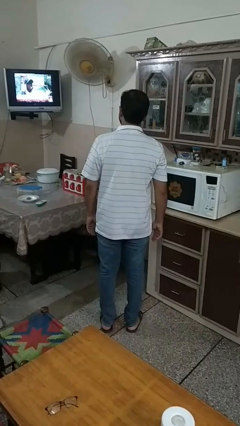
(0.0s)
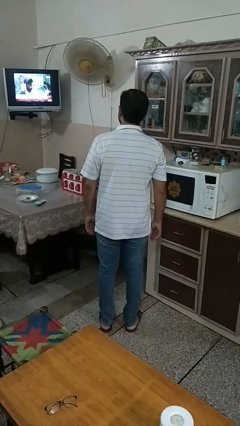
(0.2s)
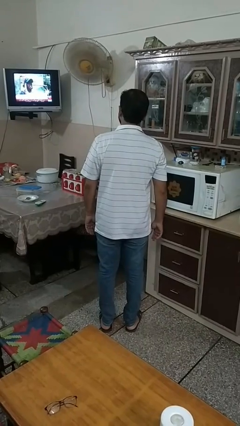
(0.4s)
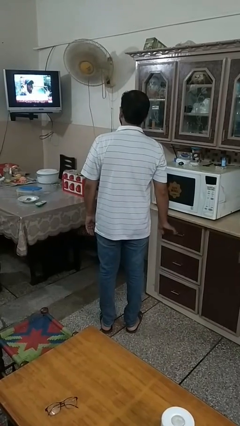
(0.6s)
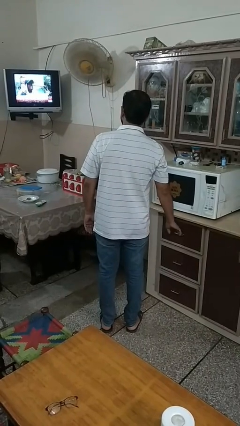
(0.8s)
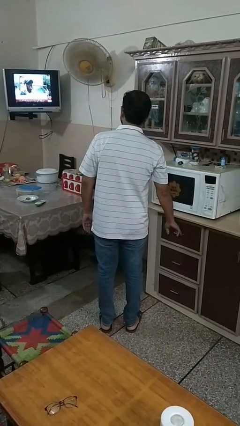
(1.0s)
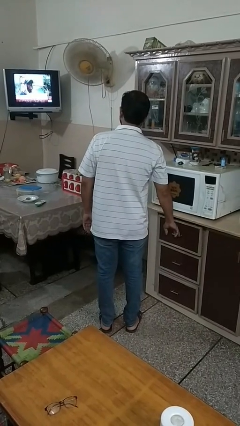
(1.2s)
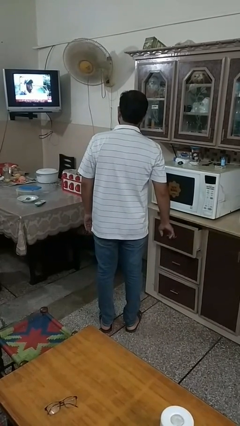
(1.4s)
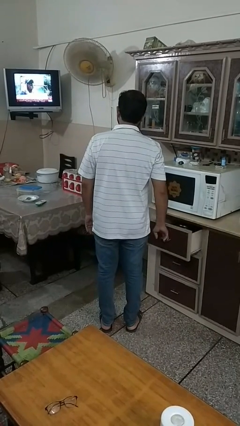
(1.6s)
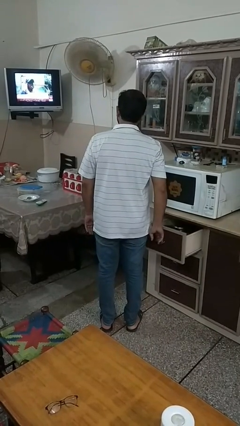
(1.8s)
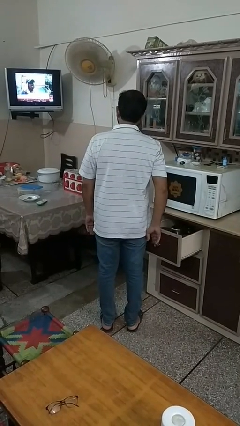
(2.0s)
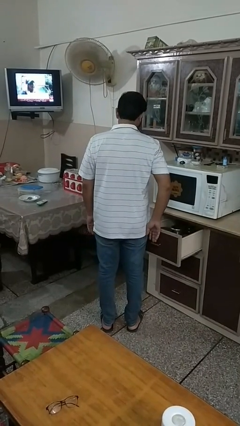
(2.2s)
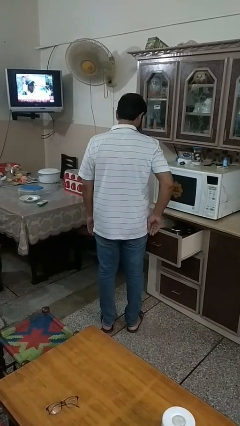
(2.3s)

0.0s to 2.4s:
person opens kitchen drawer

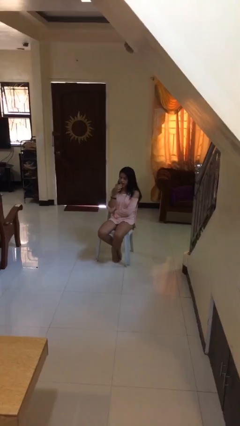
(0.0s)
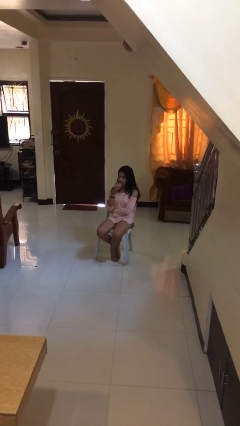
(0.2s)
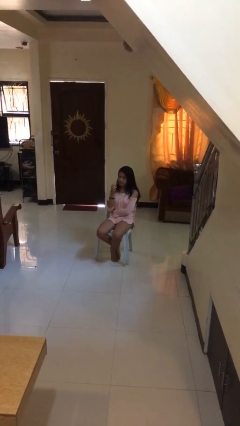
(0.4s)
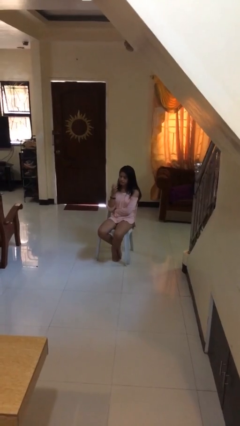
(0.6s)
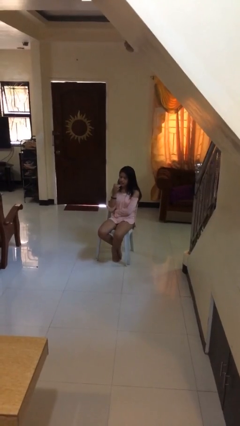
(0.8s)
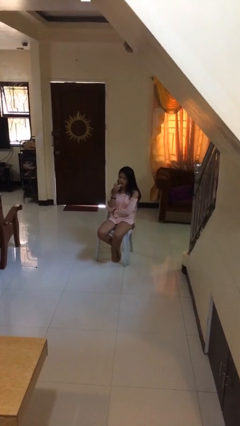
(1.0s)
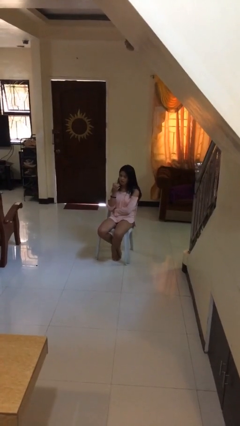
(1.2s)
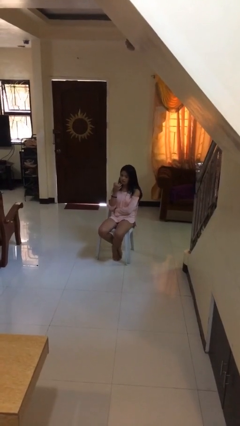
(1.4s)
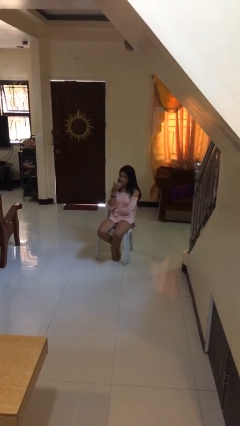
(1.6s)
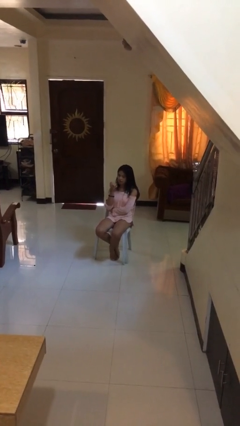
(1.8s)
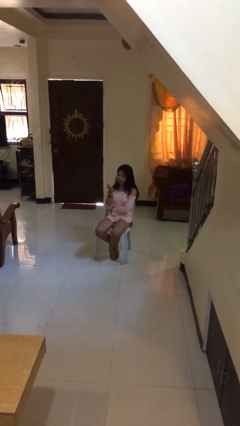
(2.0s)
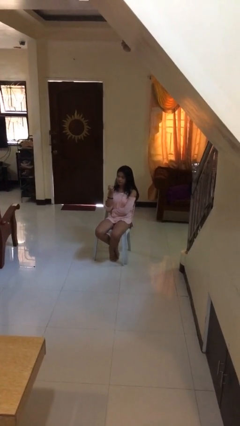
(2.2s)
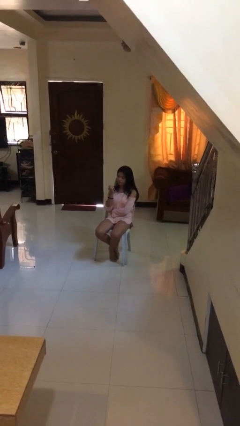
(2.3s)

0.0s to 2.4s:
person licks fingers

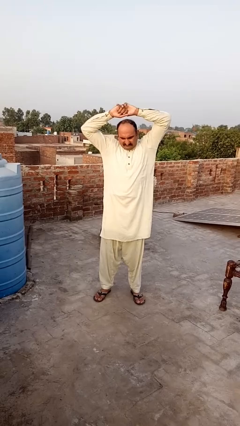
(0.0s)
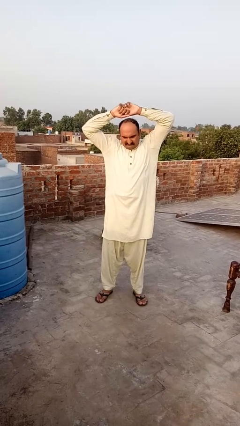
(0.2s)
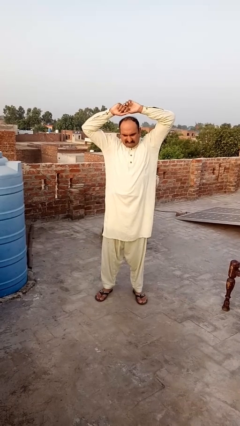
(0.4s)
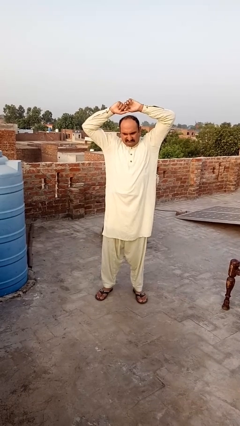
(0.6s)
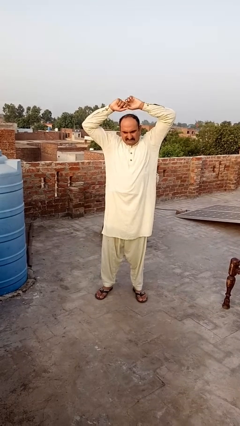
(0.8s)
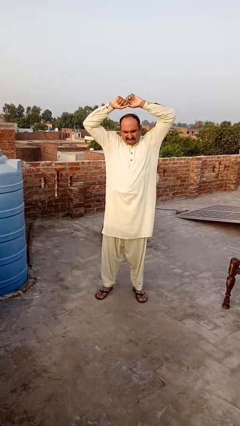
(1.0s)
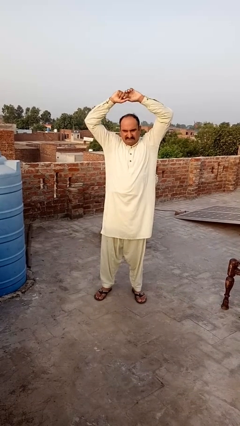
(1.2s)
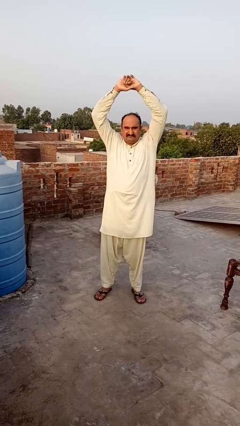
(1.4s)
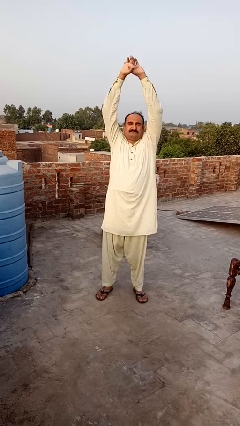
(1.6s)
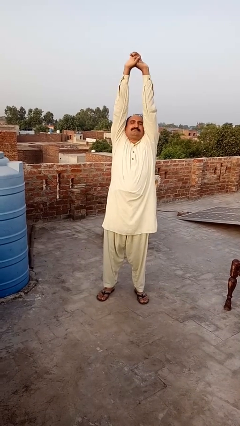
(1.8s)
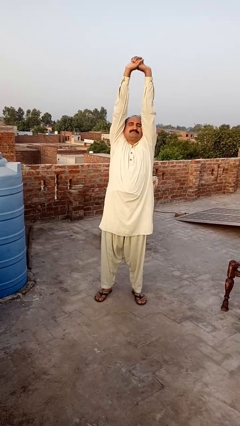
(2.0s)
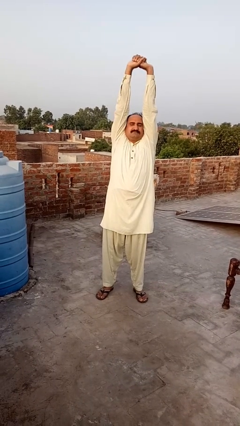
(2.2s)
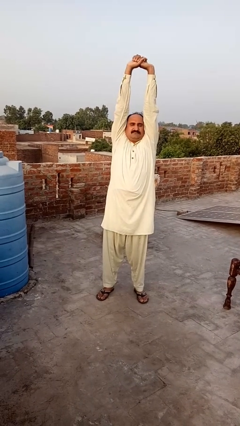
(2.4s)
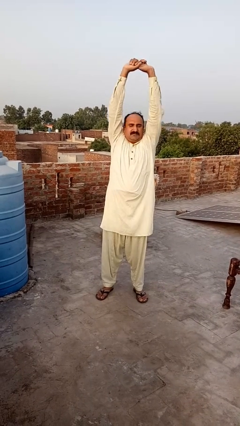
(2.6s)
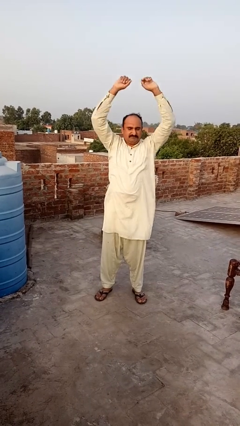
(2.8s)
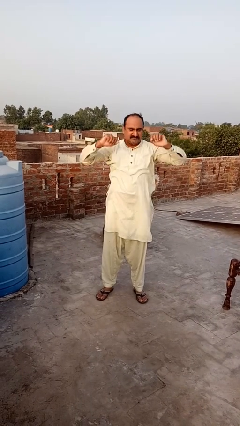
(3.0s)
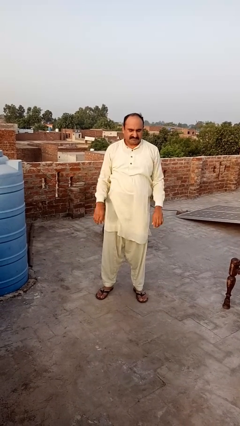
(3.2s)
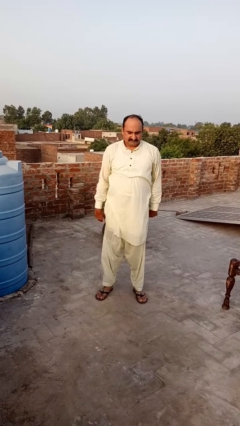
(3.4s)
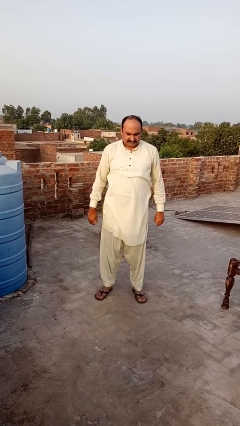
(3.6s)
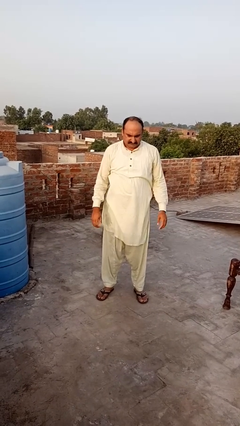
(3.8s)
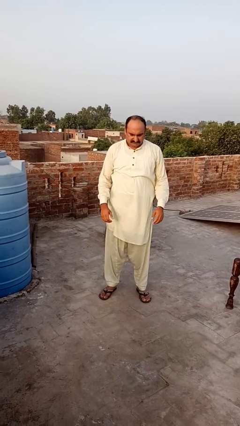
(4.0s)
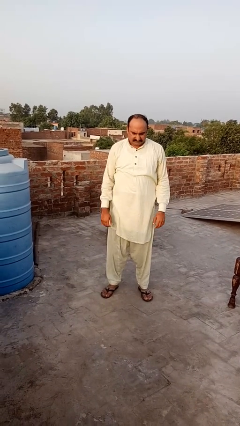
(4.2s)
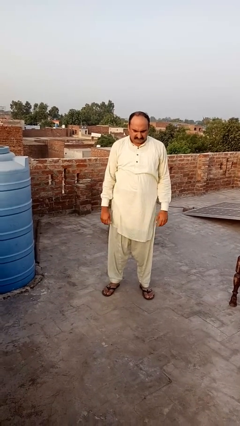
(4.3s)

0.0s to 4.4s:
person stretches arms over head

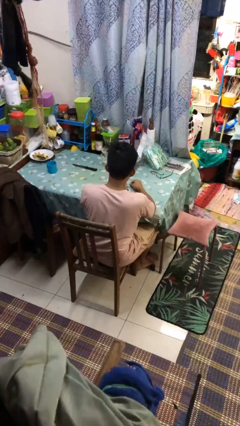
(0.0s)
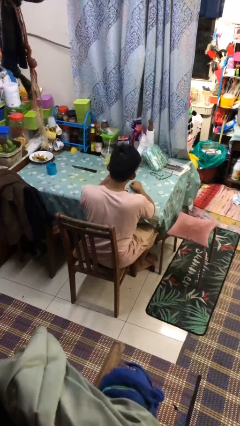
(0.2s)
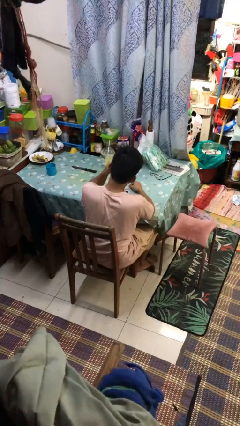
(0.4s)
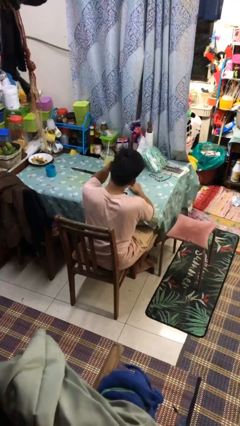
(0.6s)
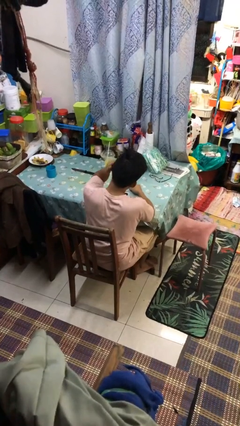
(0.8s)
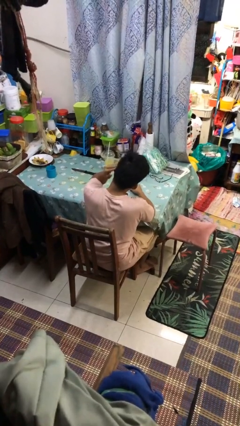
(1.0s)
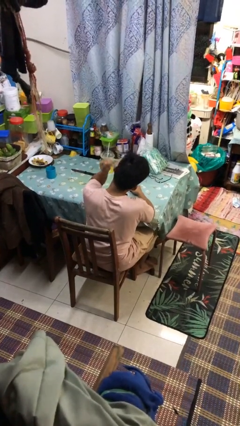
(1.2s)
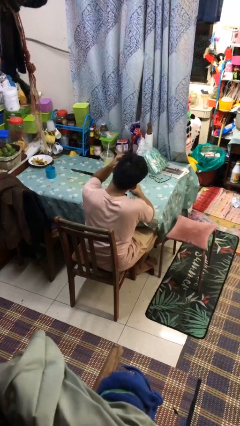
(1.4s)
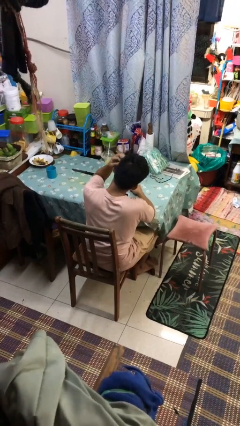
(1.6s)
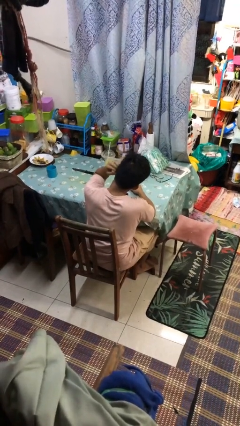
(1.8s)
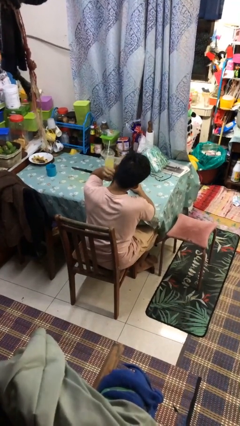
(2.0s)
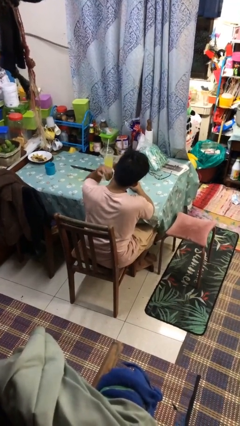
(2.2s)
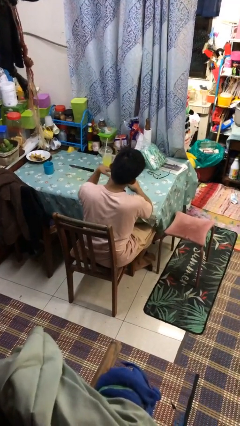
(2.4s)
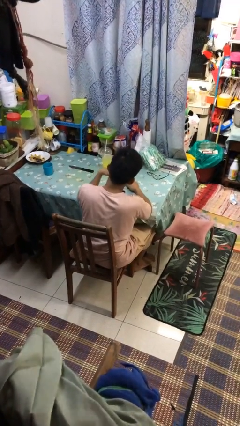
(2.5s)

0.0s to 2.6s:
person strokes hair

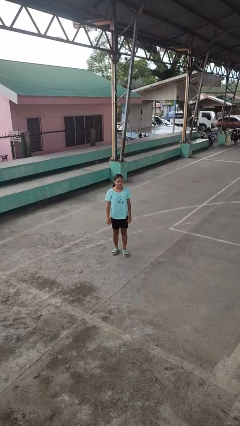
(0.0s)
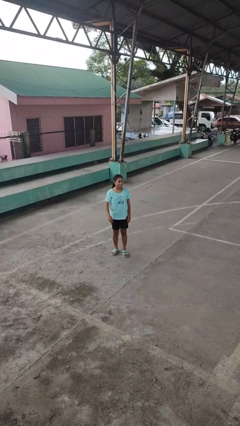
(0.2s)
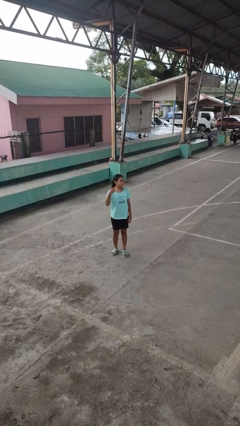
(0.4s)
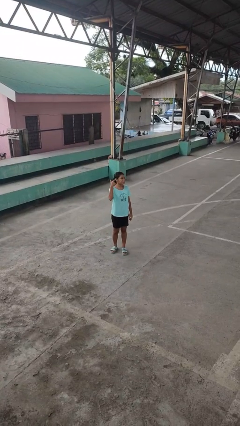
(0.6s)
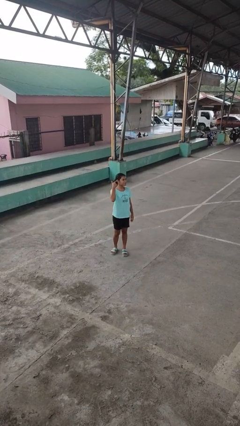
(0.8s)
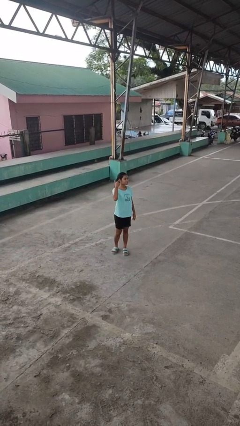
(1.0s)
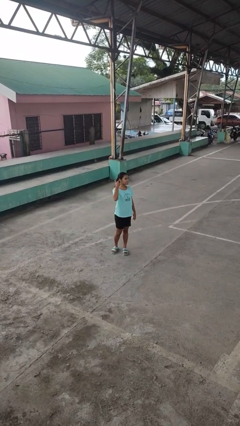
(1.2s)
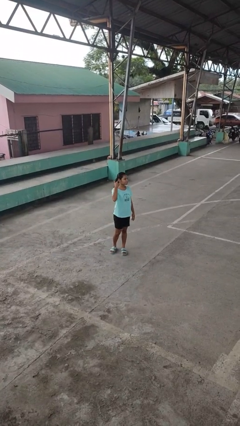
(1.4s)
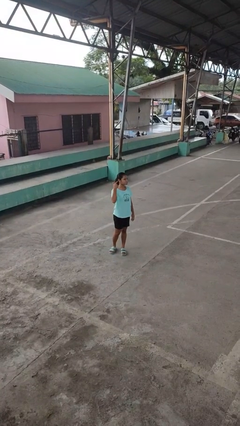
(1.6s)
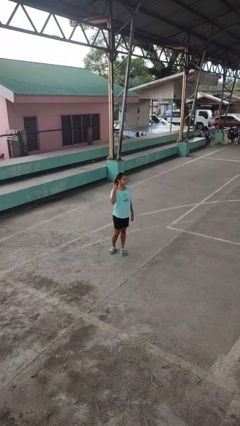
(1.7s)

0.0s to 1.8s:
person gestures listen closely

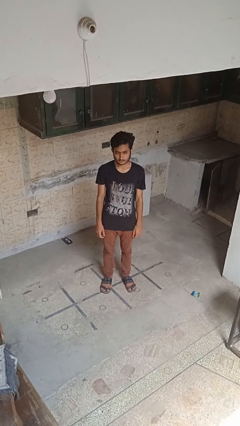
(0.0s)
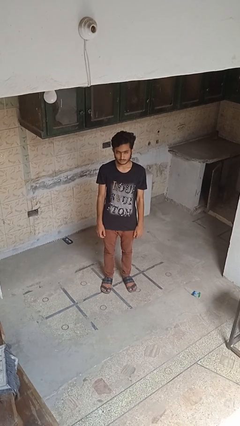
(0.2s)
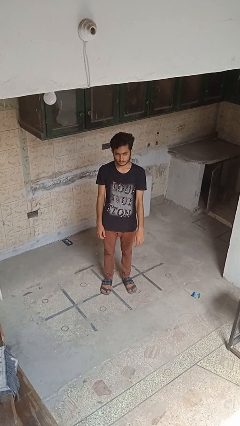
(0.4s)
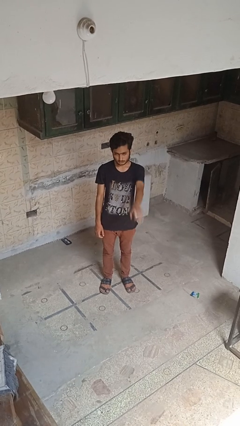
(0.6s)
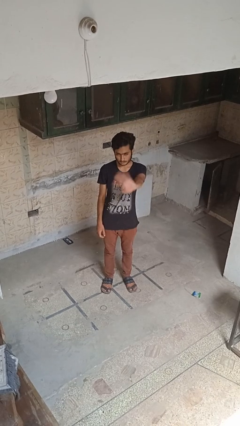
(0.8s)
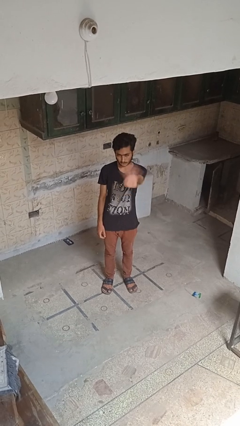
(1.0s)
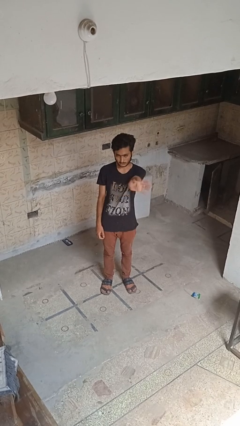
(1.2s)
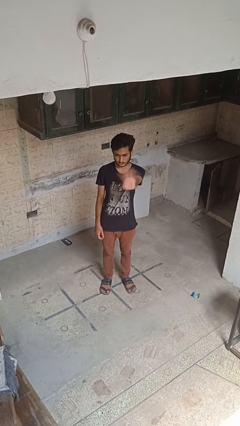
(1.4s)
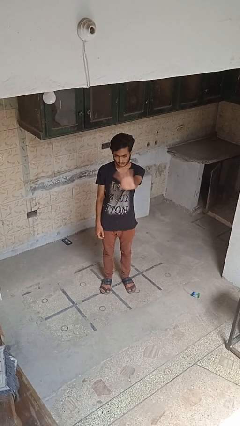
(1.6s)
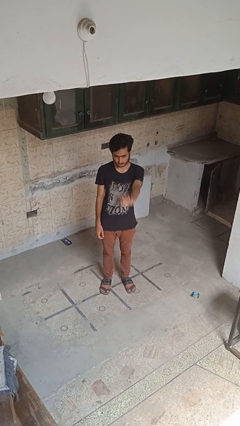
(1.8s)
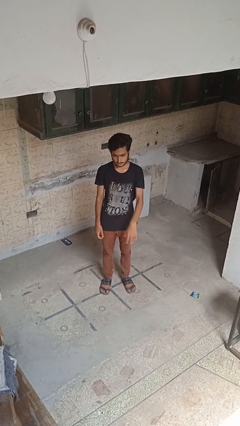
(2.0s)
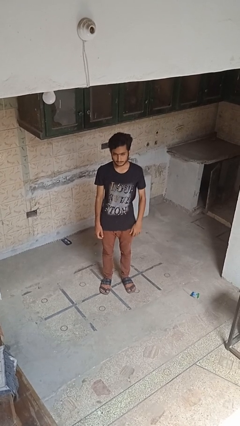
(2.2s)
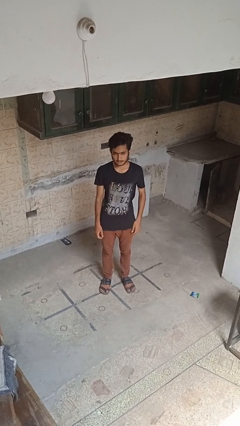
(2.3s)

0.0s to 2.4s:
person waves at person

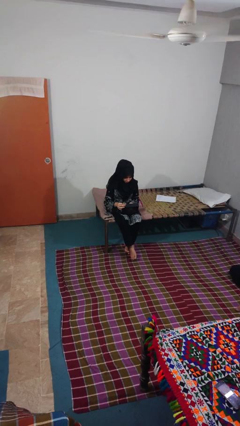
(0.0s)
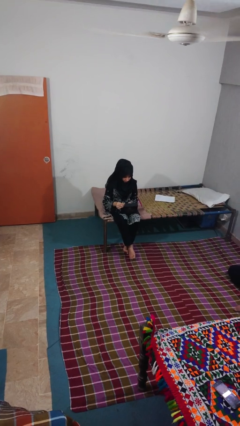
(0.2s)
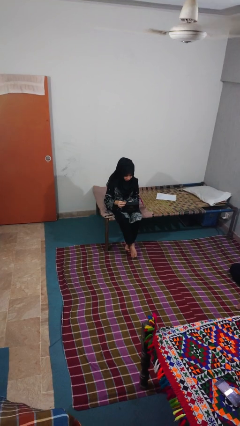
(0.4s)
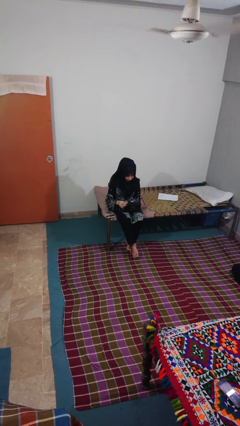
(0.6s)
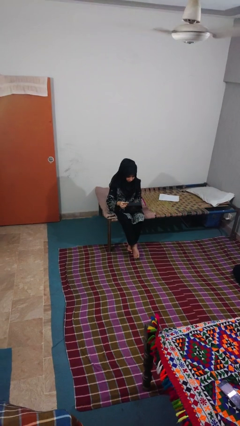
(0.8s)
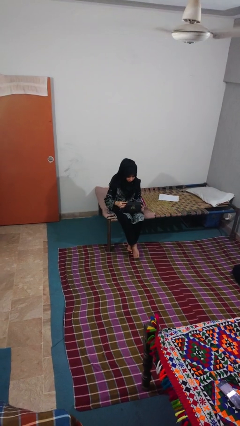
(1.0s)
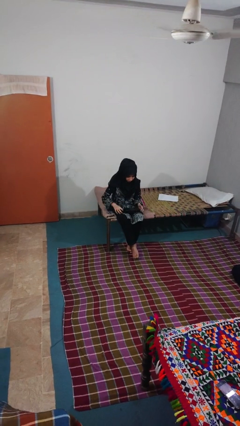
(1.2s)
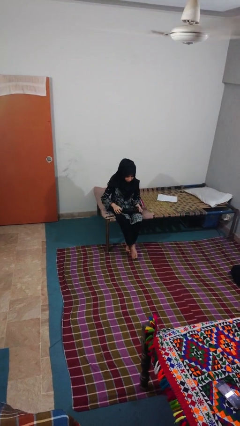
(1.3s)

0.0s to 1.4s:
person closes jewelry box
